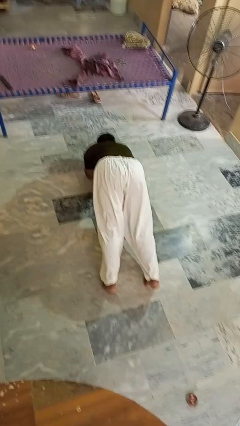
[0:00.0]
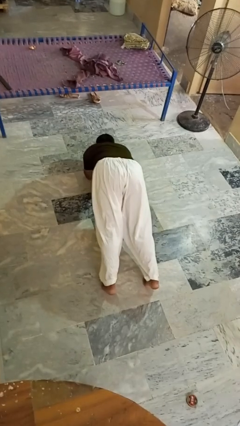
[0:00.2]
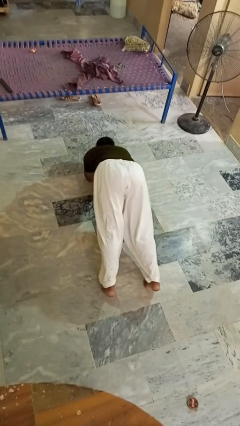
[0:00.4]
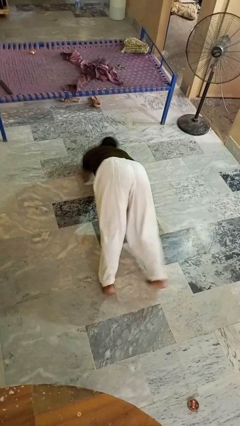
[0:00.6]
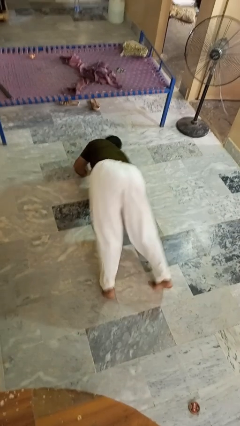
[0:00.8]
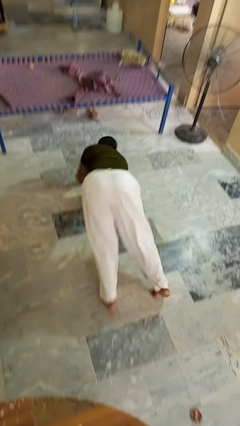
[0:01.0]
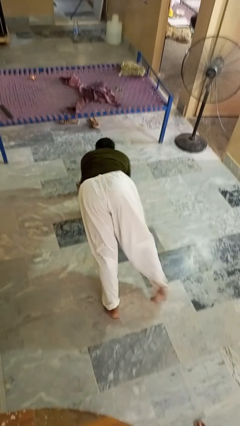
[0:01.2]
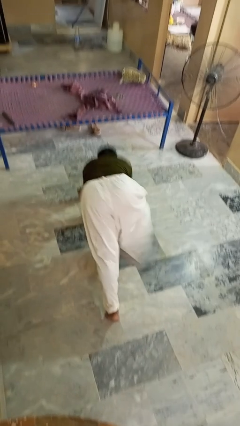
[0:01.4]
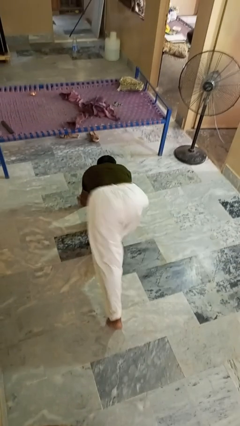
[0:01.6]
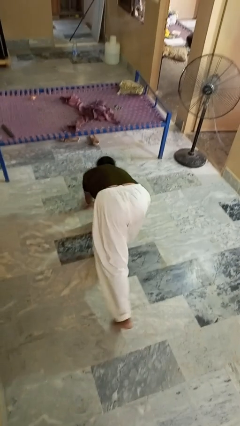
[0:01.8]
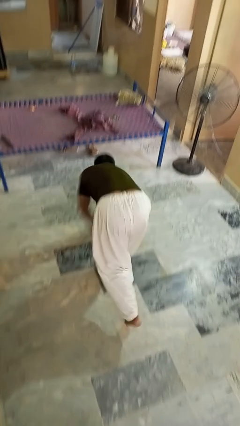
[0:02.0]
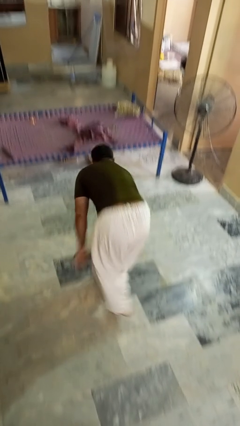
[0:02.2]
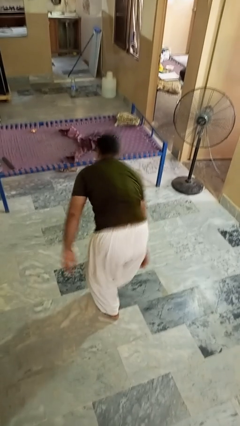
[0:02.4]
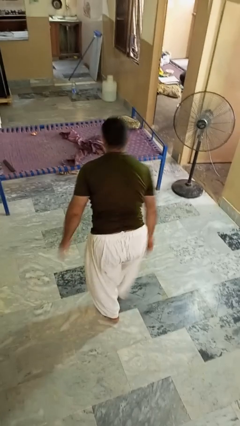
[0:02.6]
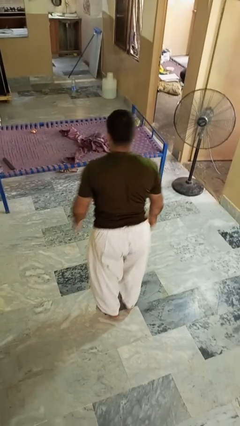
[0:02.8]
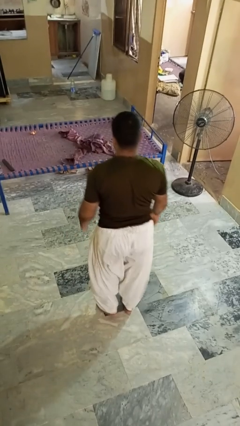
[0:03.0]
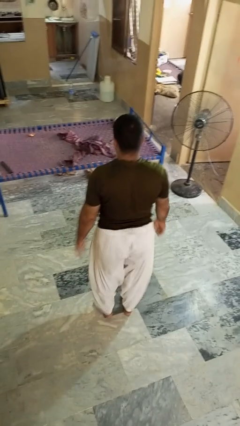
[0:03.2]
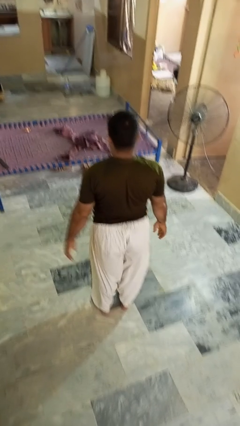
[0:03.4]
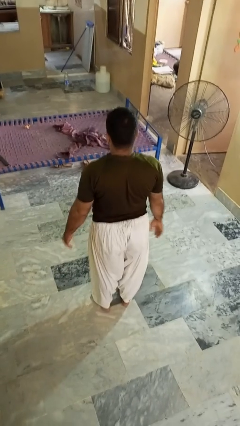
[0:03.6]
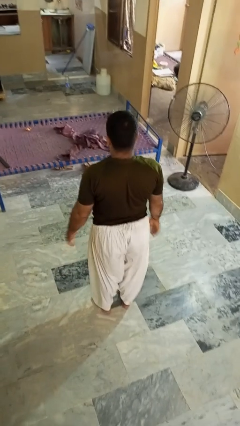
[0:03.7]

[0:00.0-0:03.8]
person stands up from floor

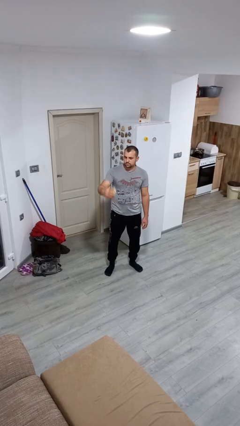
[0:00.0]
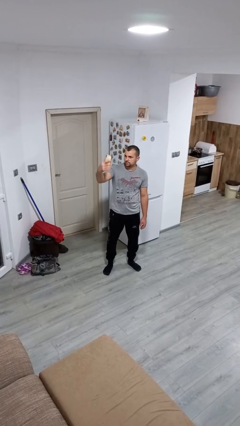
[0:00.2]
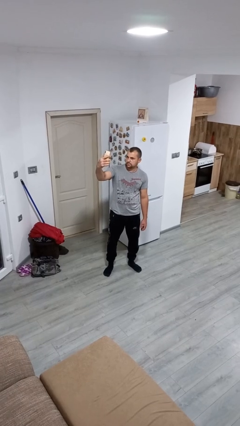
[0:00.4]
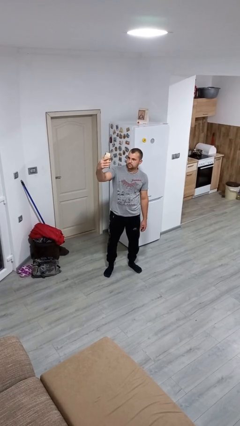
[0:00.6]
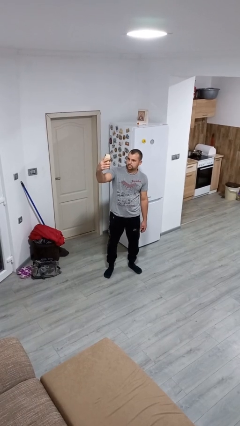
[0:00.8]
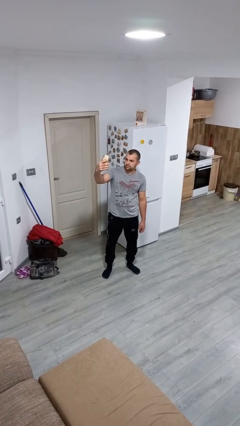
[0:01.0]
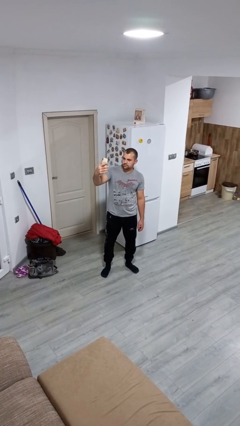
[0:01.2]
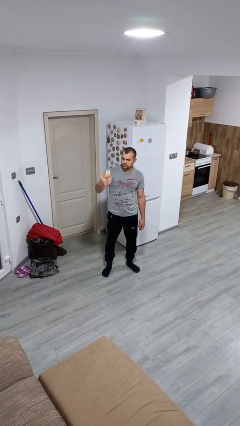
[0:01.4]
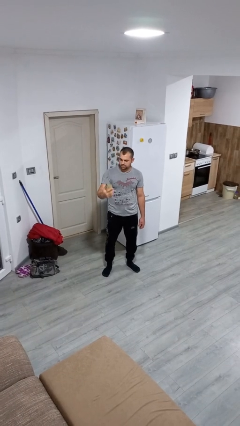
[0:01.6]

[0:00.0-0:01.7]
person takes selfie

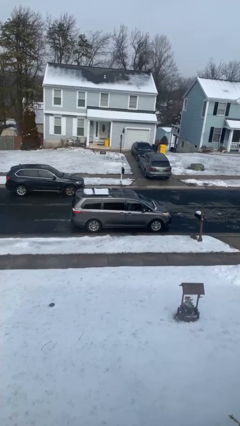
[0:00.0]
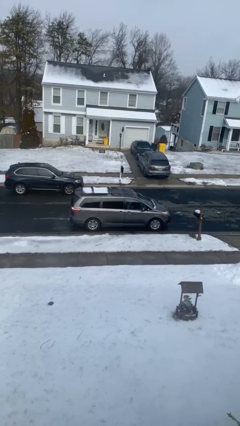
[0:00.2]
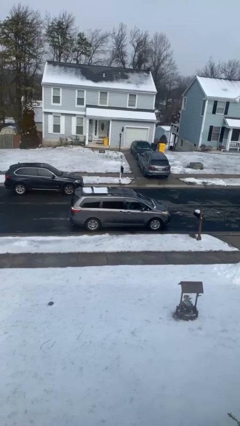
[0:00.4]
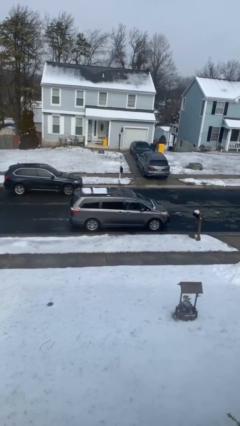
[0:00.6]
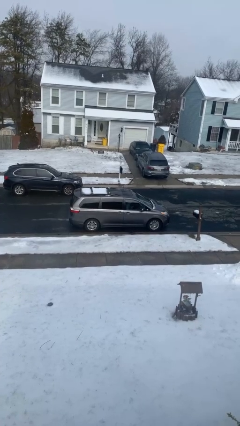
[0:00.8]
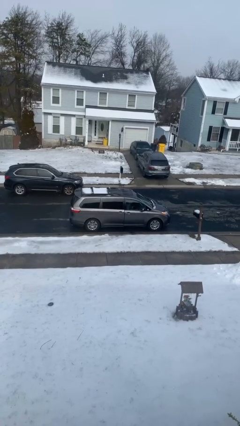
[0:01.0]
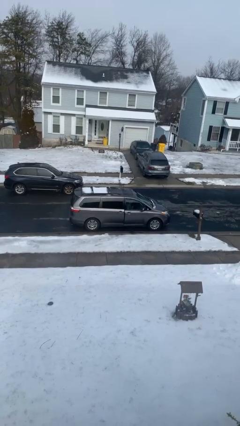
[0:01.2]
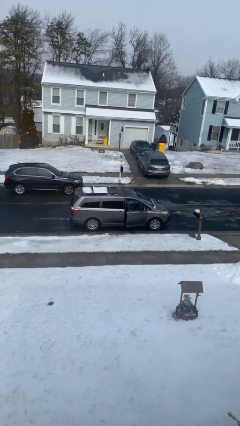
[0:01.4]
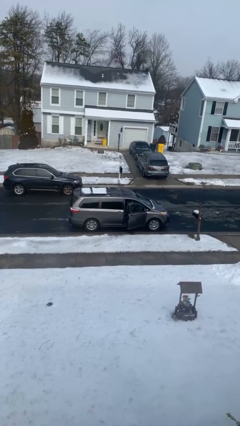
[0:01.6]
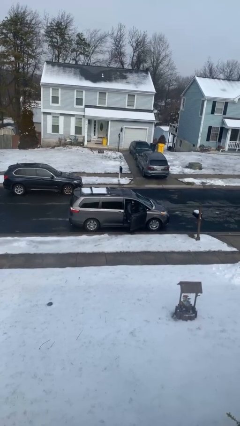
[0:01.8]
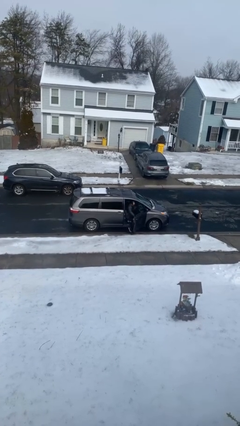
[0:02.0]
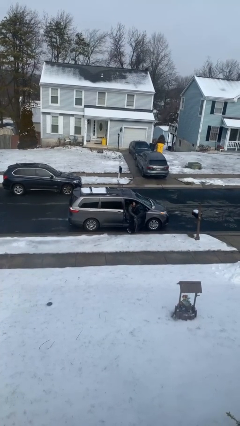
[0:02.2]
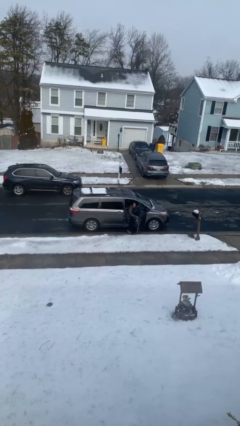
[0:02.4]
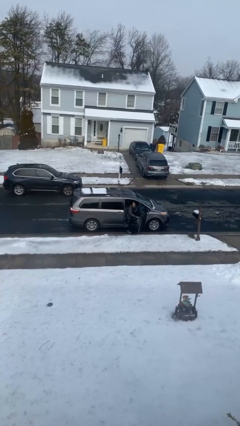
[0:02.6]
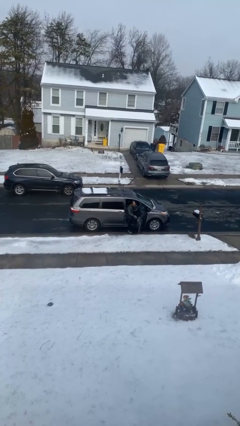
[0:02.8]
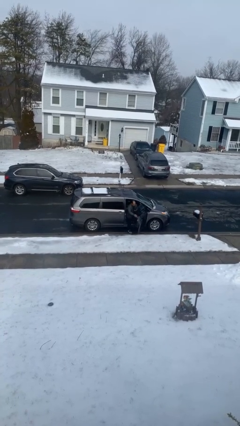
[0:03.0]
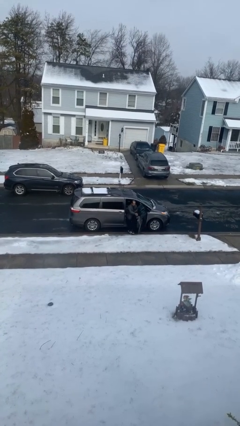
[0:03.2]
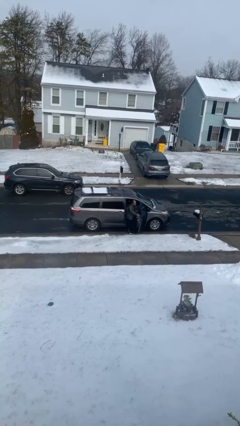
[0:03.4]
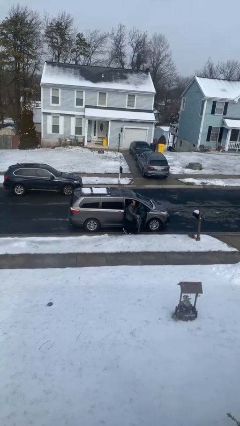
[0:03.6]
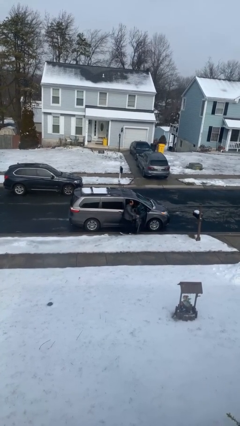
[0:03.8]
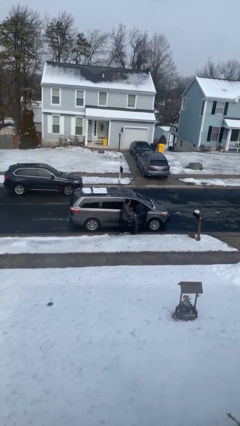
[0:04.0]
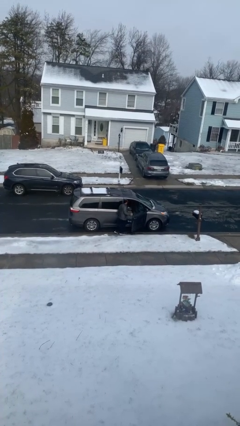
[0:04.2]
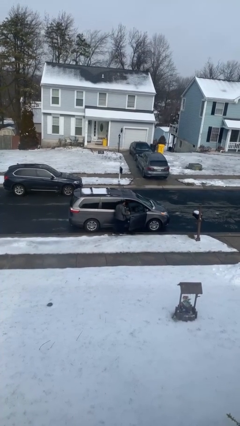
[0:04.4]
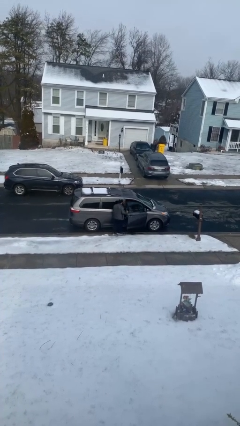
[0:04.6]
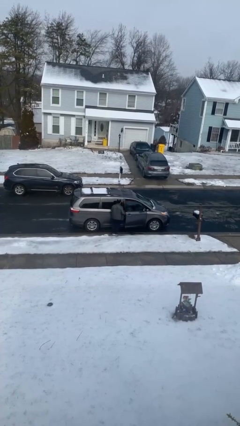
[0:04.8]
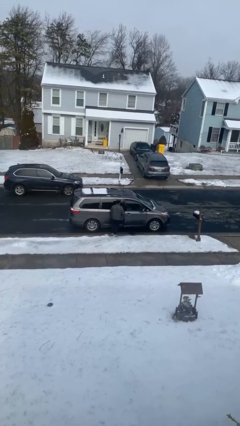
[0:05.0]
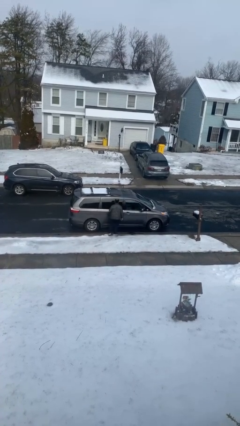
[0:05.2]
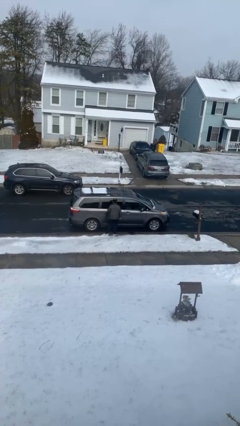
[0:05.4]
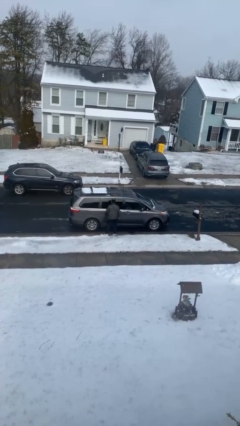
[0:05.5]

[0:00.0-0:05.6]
car drops off person

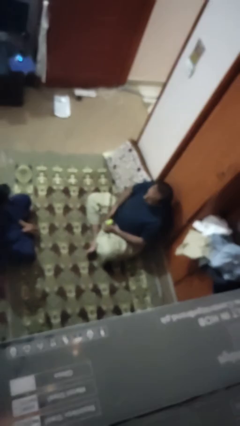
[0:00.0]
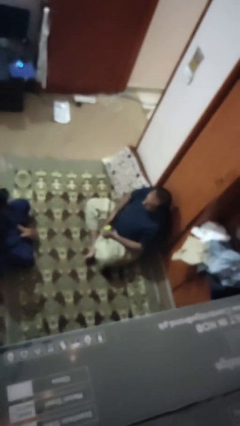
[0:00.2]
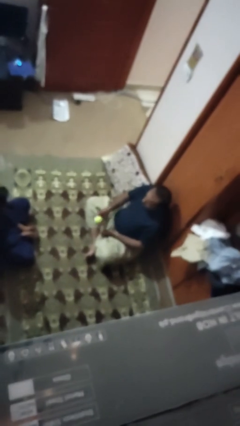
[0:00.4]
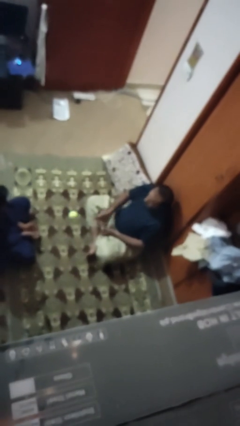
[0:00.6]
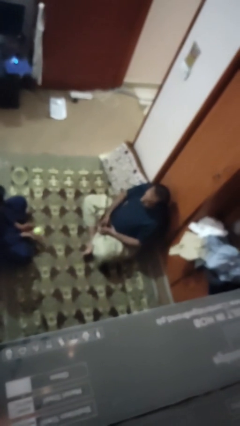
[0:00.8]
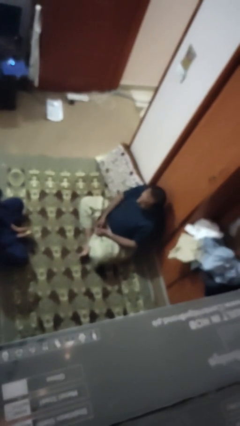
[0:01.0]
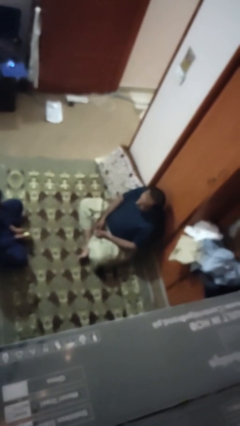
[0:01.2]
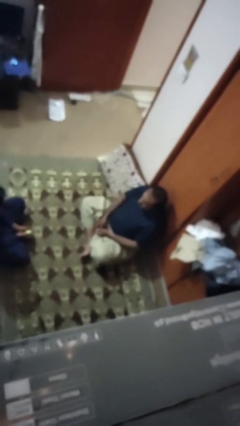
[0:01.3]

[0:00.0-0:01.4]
person throws object to person

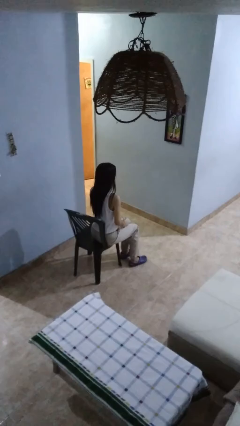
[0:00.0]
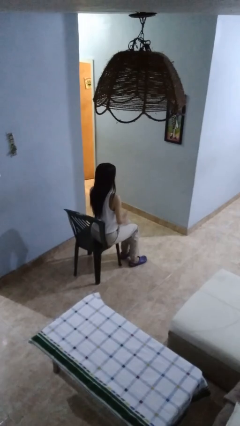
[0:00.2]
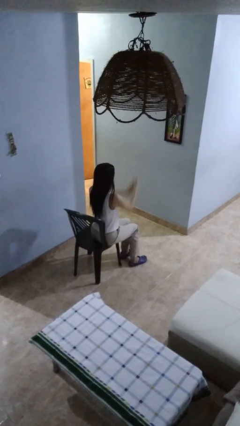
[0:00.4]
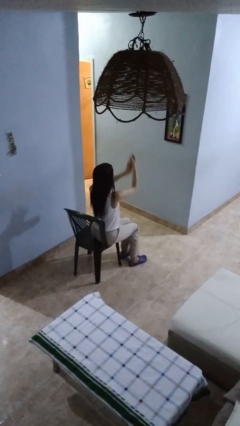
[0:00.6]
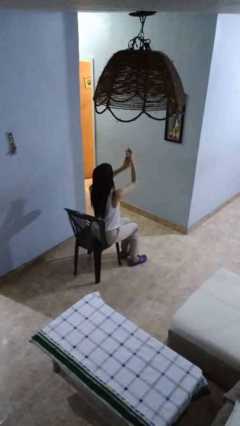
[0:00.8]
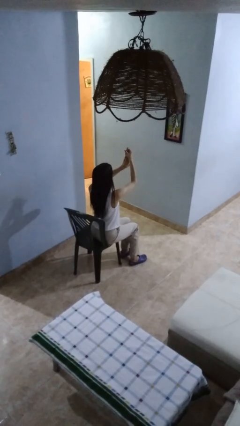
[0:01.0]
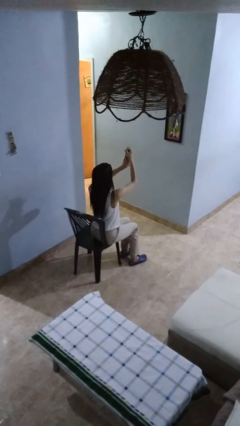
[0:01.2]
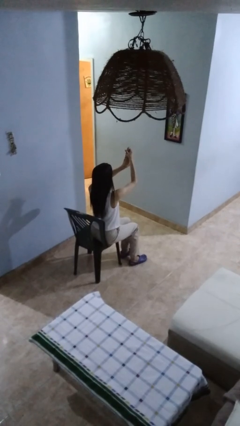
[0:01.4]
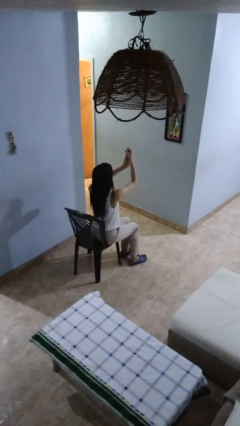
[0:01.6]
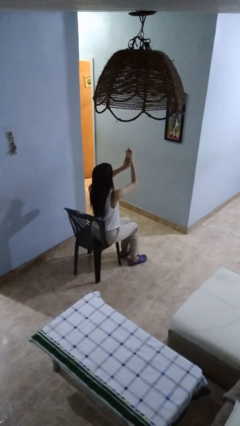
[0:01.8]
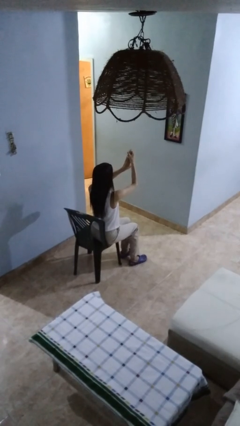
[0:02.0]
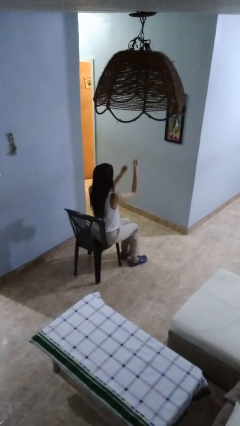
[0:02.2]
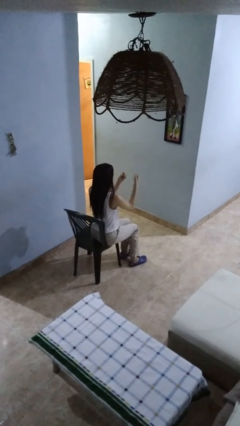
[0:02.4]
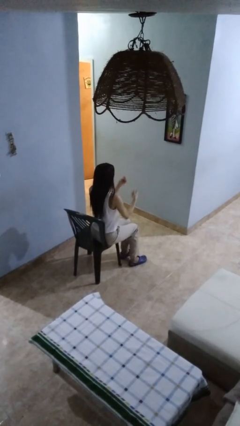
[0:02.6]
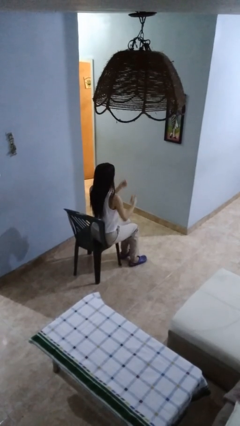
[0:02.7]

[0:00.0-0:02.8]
person clips fingernails

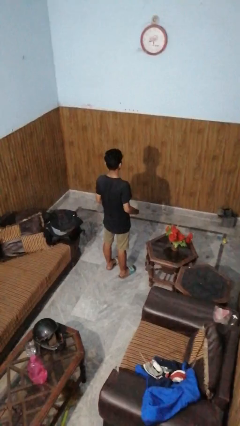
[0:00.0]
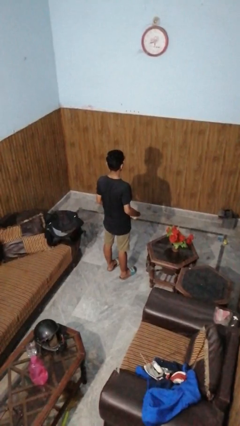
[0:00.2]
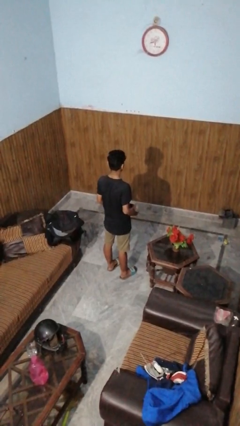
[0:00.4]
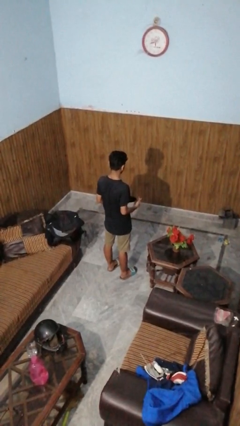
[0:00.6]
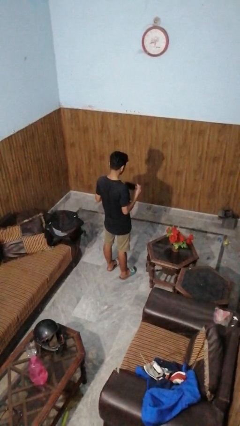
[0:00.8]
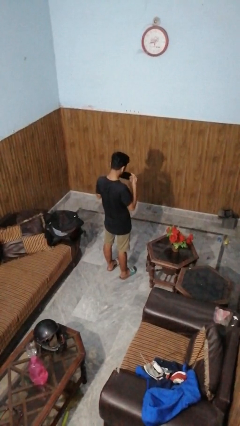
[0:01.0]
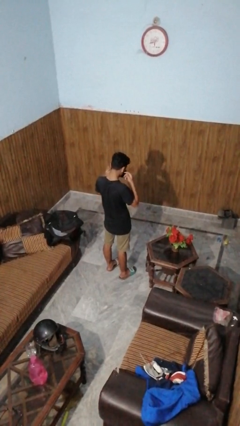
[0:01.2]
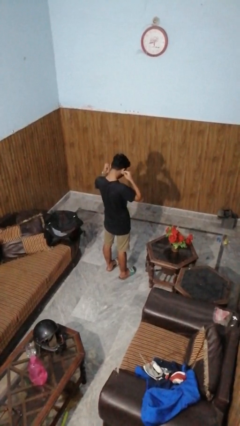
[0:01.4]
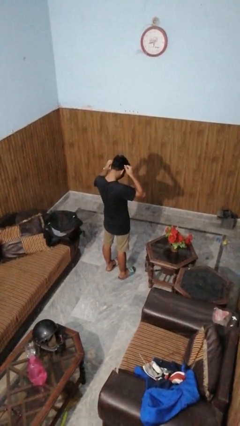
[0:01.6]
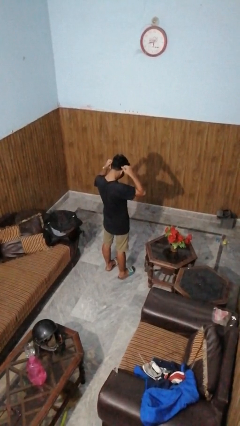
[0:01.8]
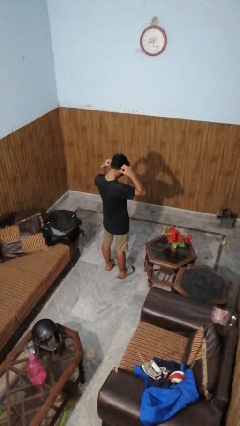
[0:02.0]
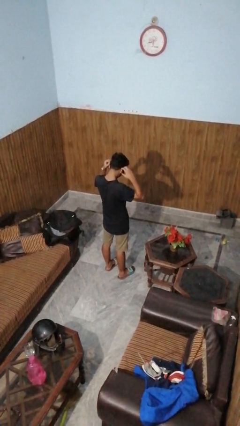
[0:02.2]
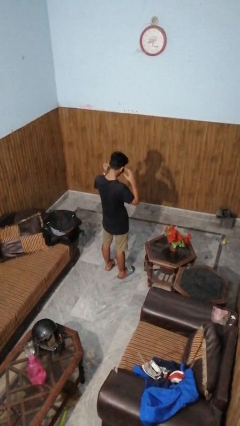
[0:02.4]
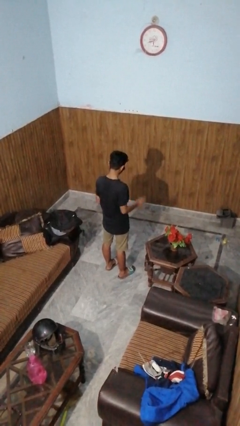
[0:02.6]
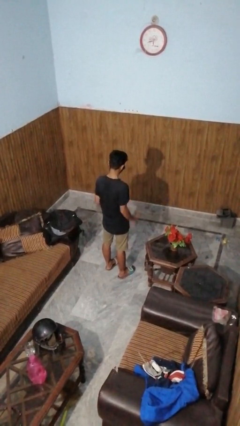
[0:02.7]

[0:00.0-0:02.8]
person puts on facemask
